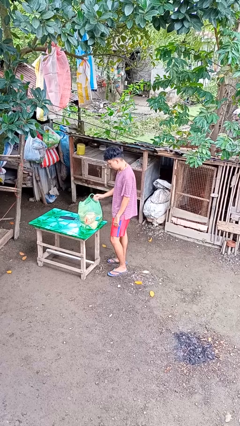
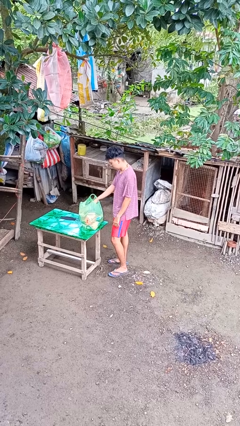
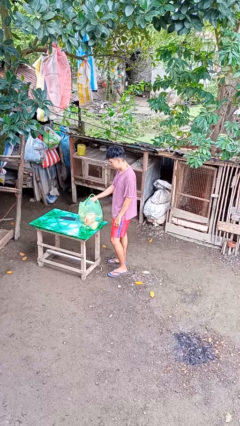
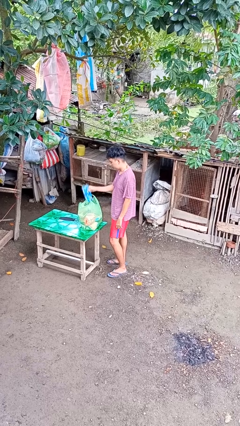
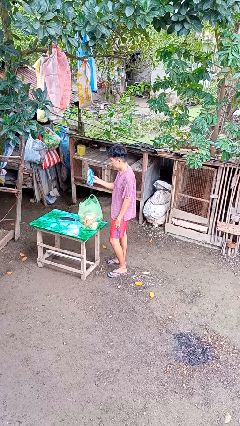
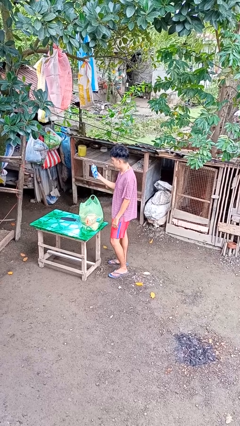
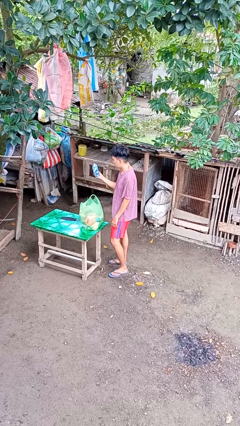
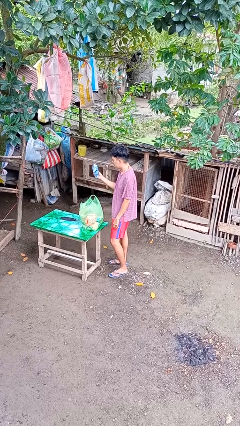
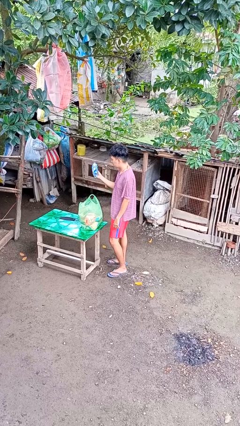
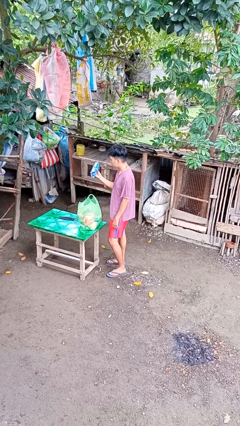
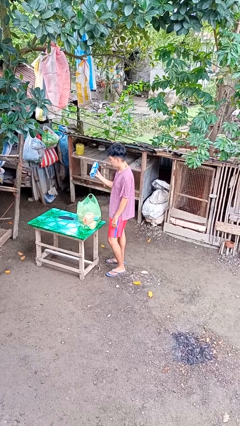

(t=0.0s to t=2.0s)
person takes object from bag

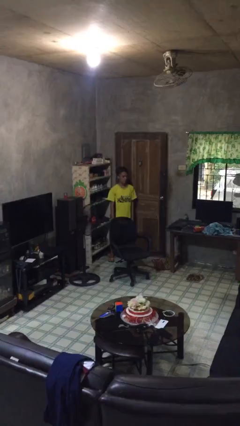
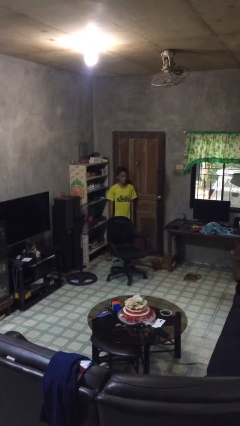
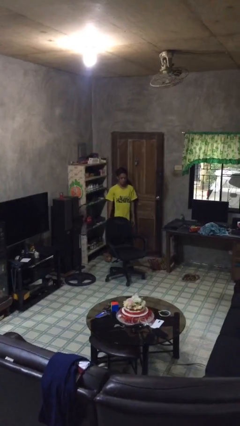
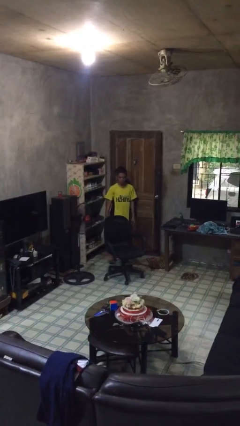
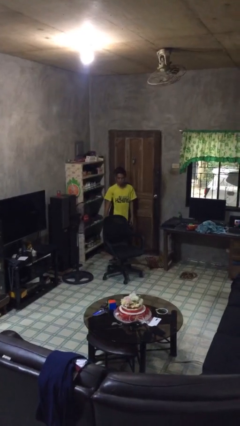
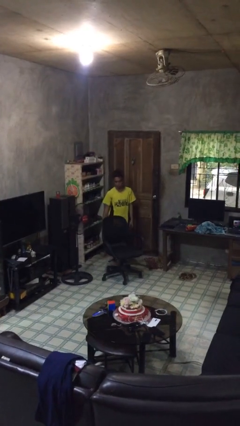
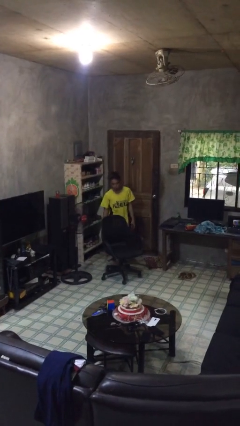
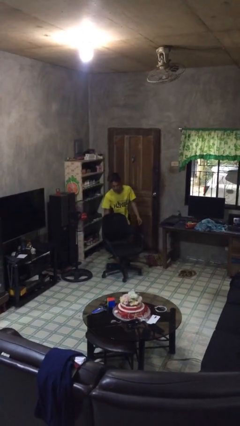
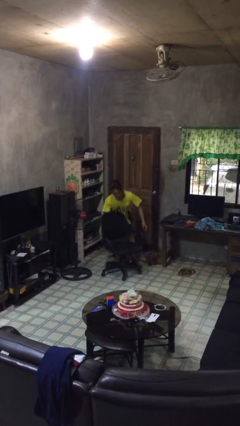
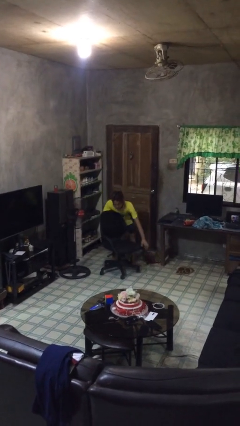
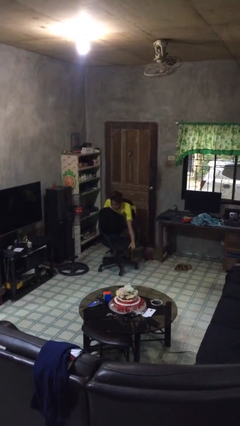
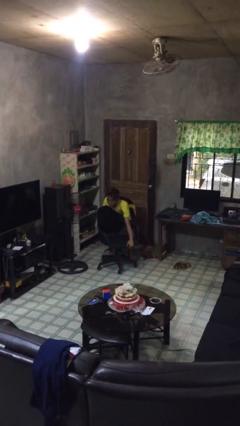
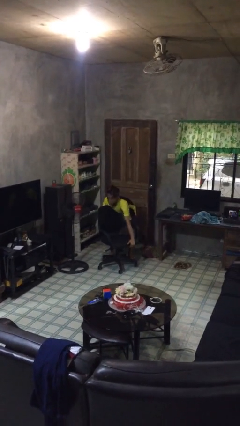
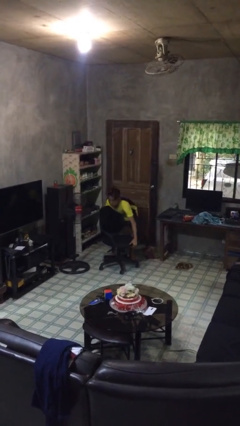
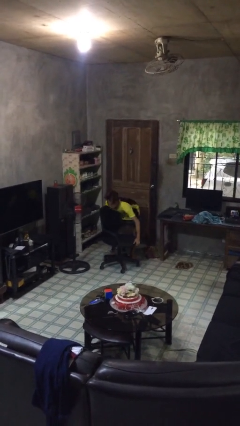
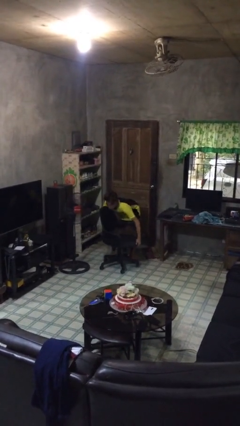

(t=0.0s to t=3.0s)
person picks up object from floor

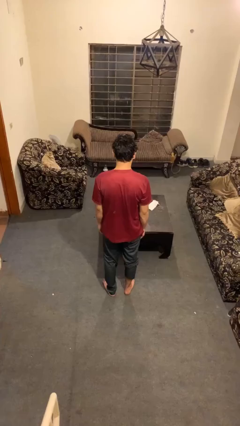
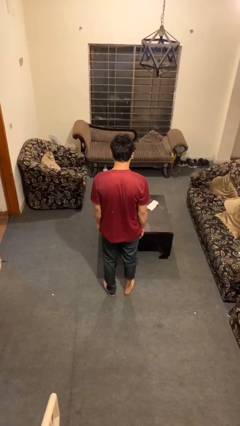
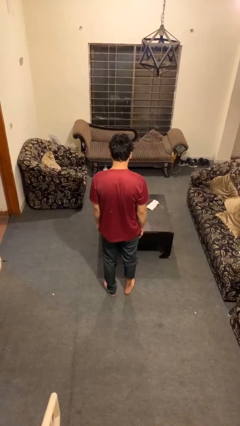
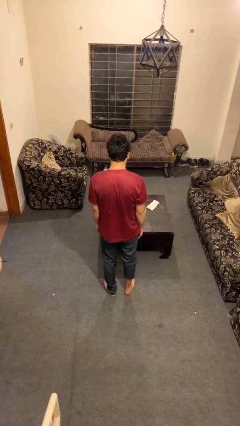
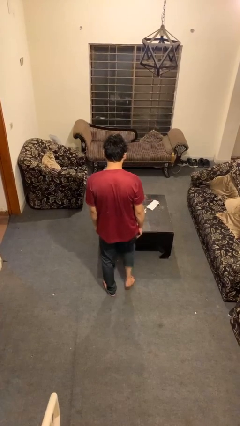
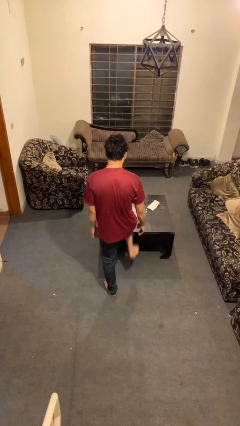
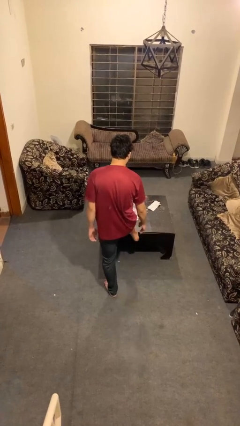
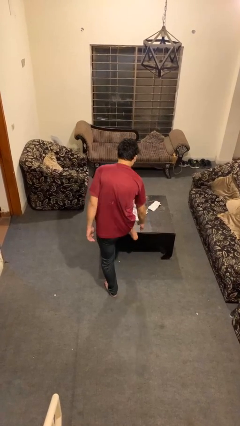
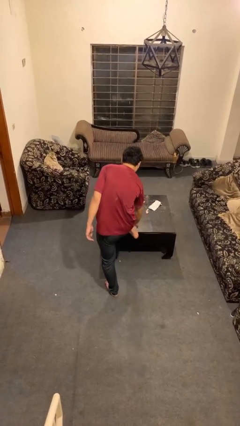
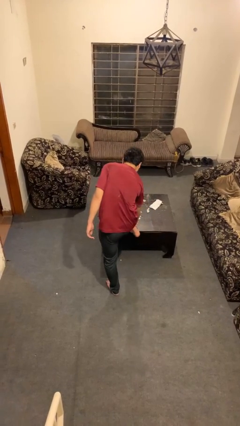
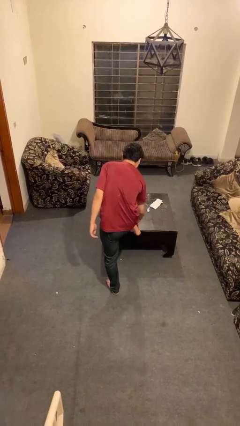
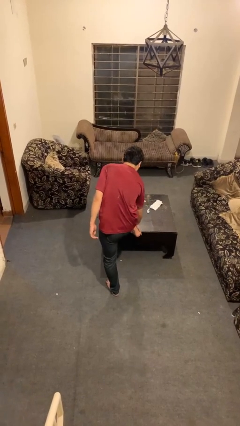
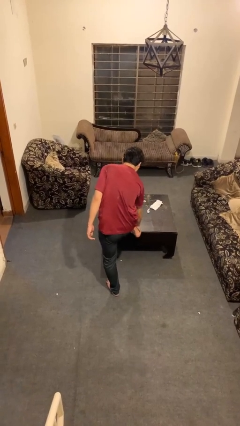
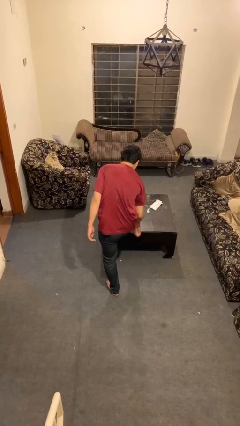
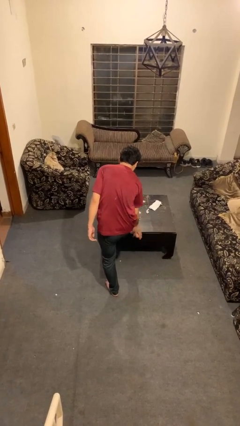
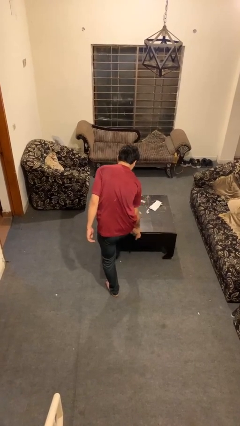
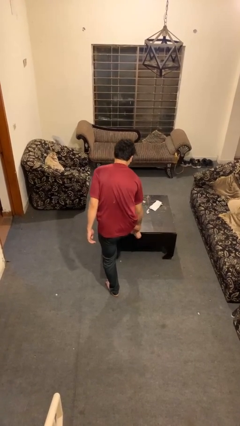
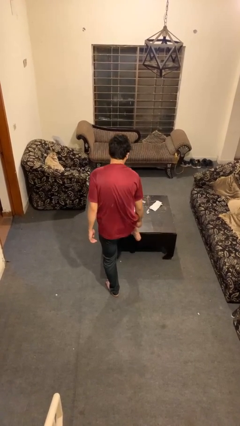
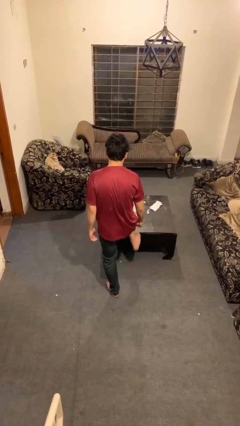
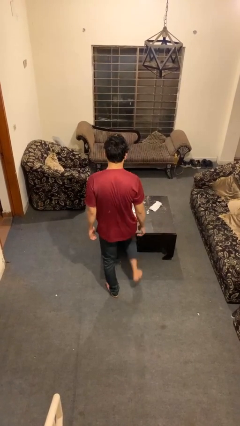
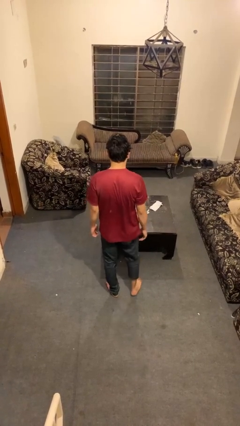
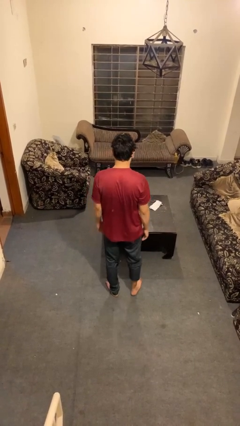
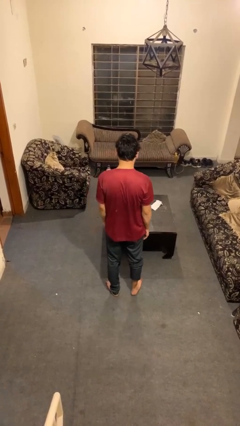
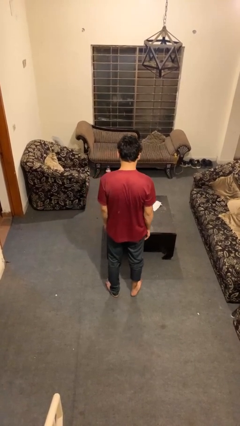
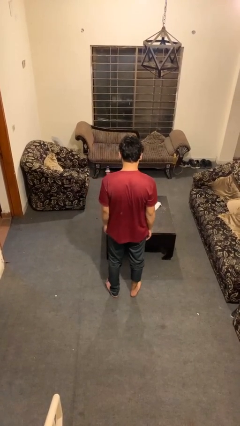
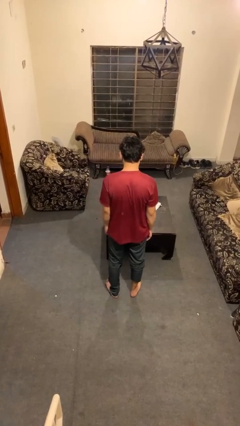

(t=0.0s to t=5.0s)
person rubs foot

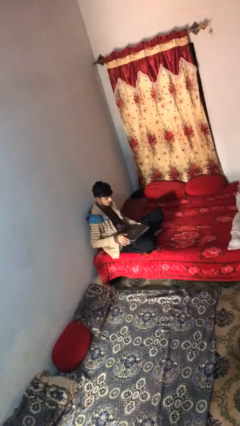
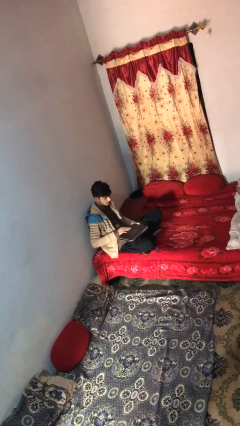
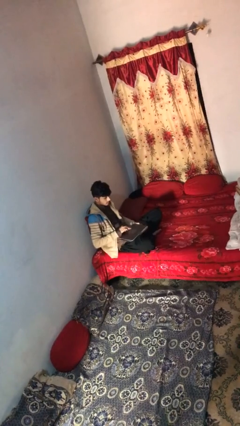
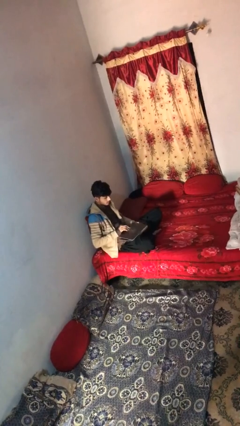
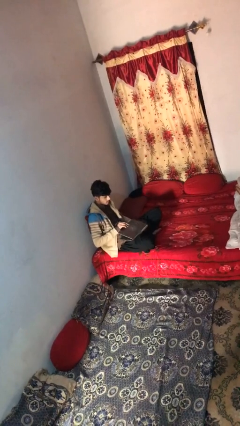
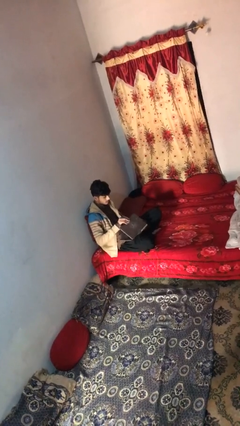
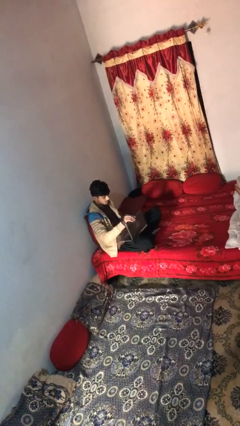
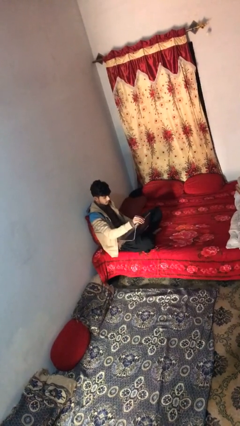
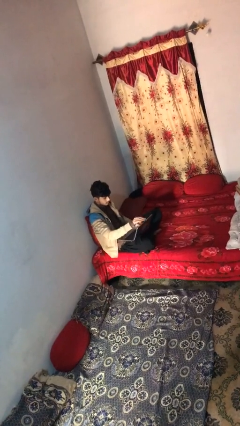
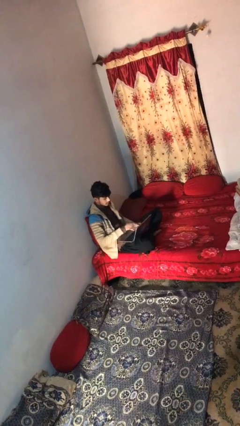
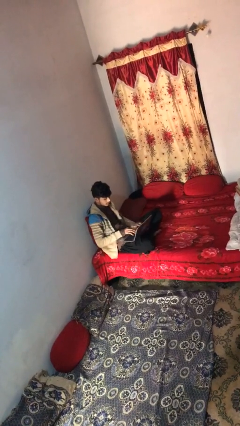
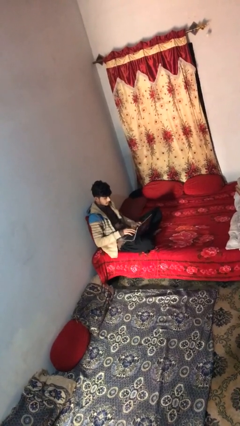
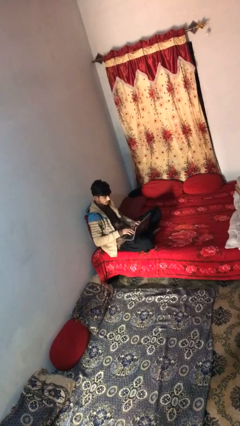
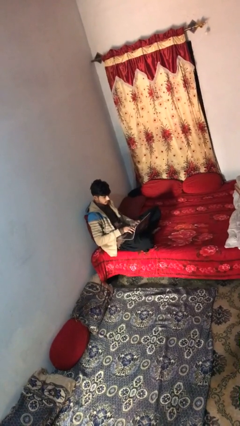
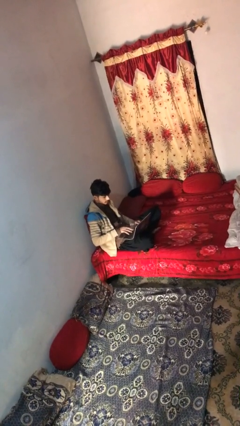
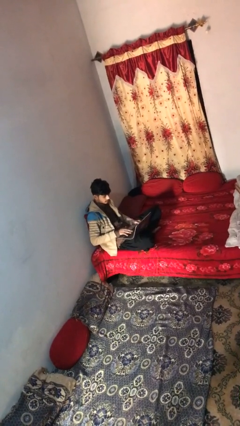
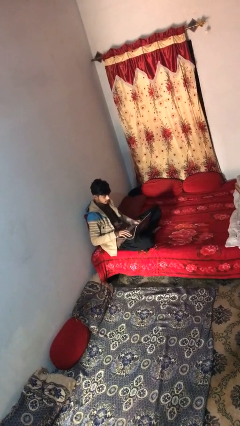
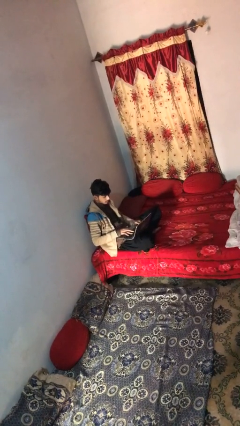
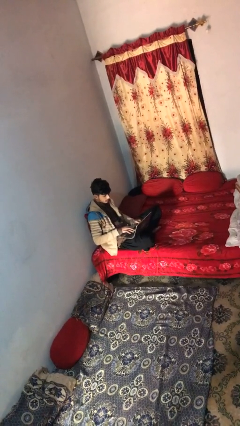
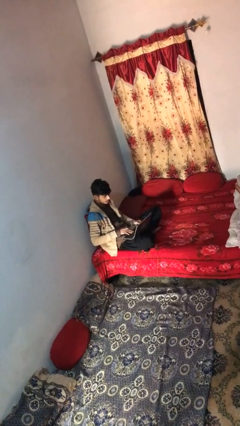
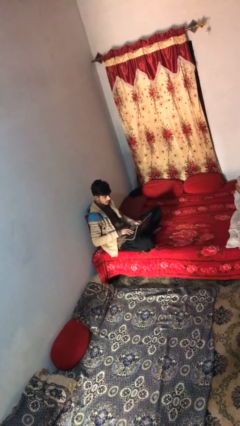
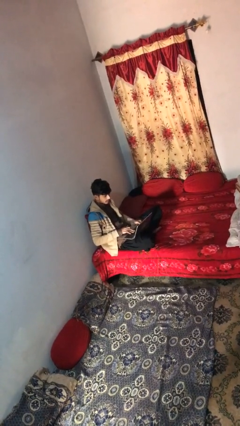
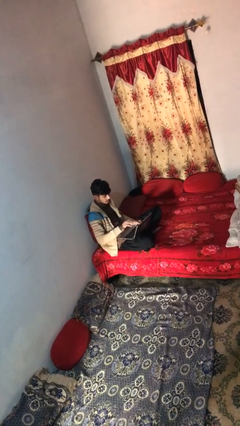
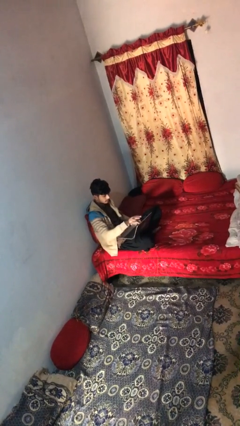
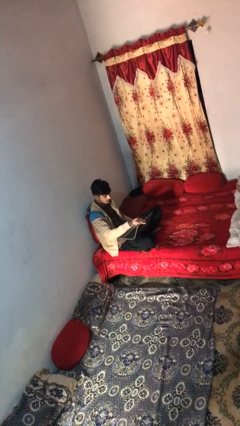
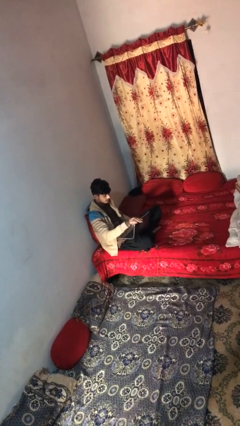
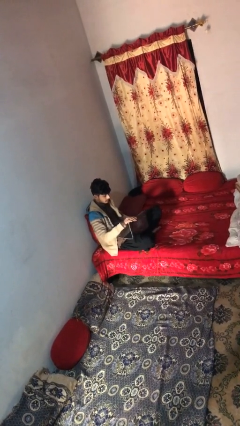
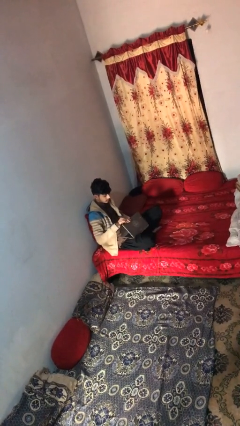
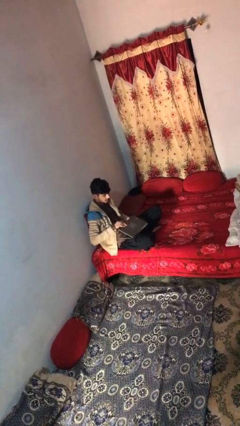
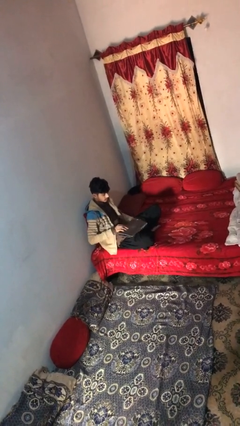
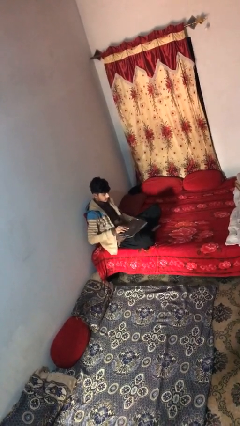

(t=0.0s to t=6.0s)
person interacts with laptop

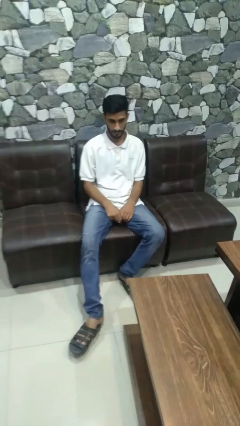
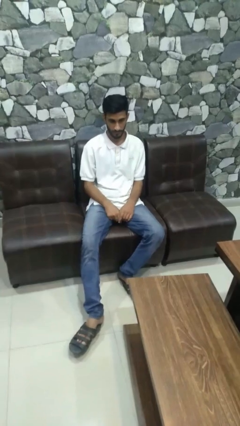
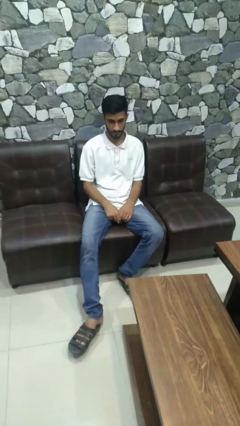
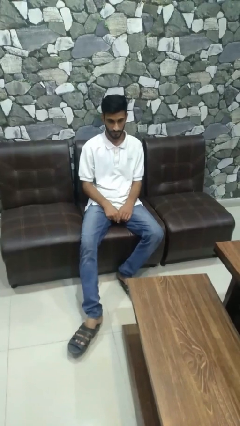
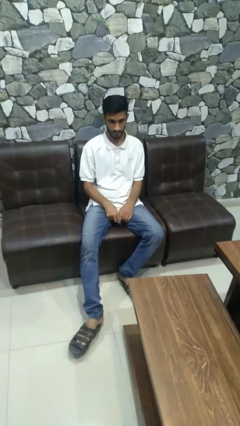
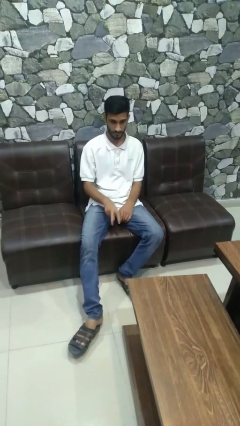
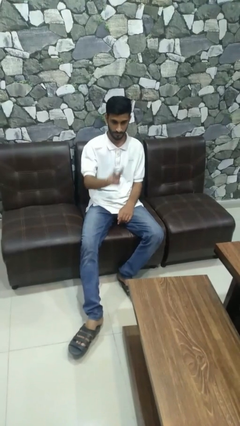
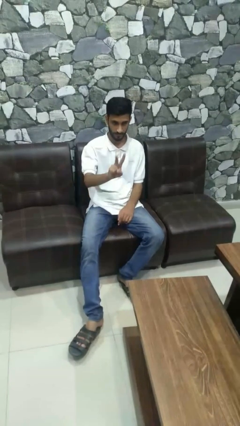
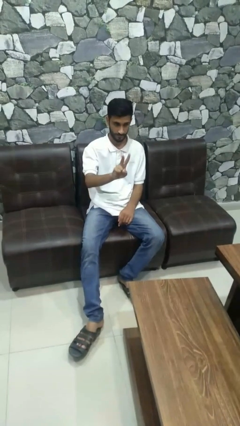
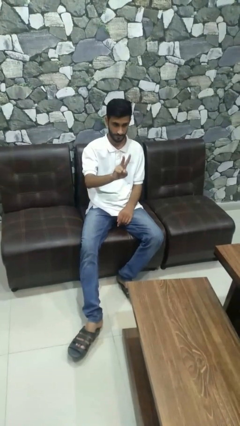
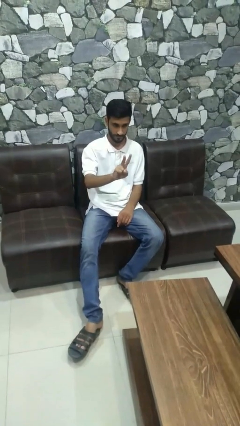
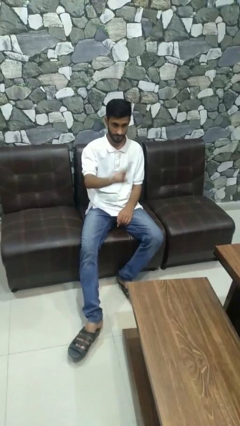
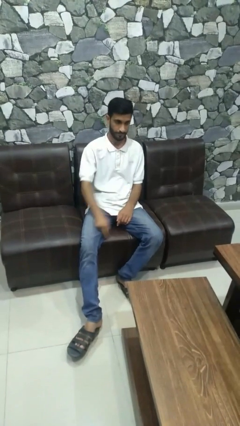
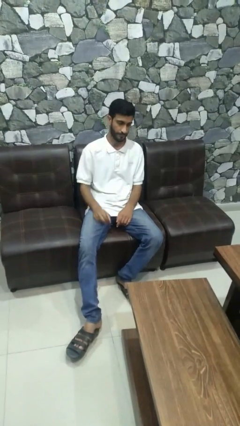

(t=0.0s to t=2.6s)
person gestures peace
